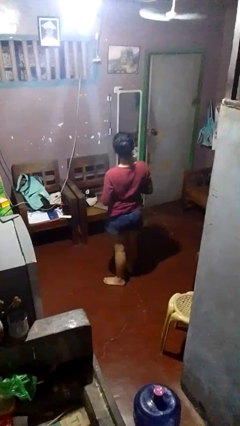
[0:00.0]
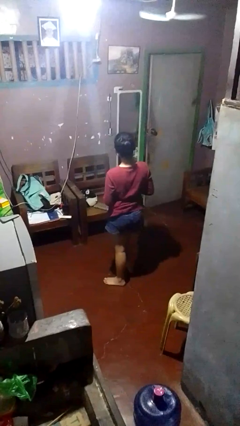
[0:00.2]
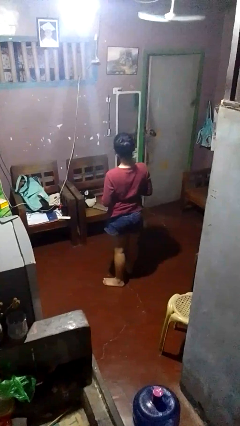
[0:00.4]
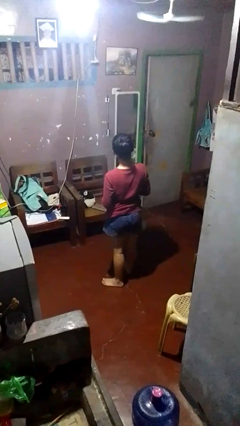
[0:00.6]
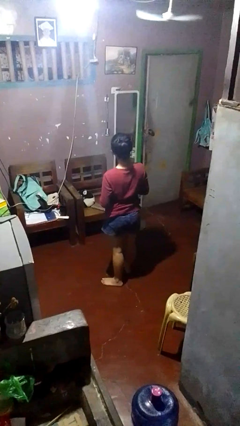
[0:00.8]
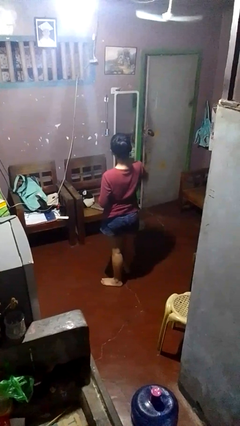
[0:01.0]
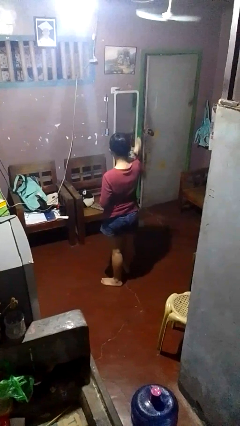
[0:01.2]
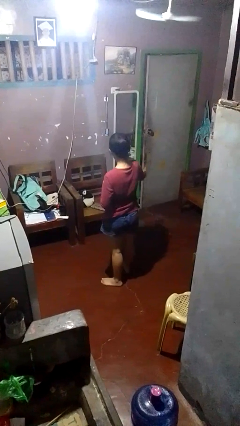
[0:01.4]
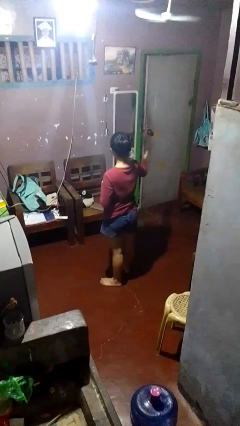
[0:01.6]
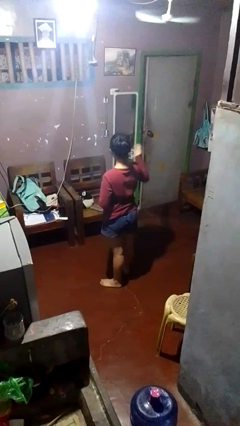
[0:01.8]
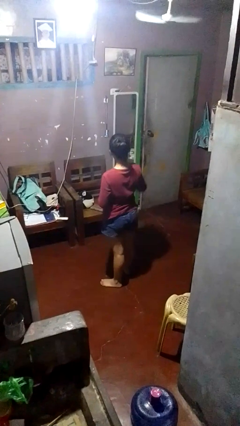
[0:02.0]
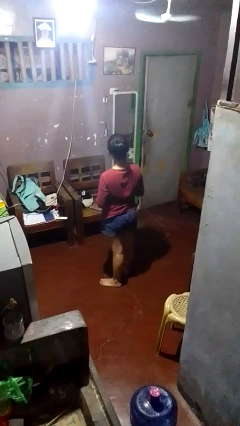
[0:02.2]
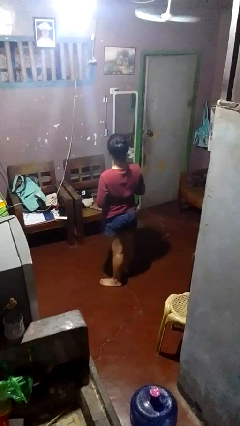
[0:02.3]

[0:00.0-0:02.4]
person karate chop

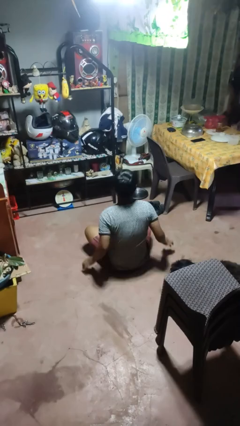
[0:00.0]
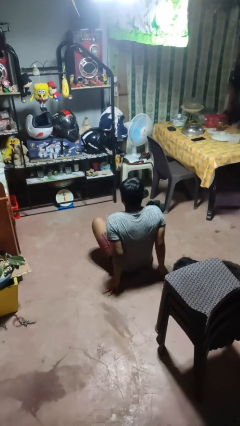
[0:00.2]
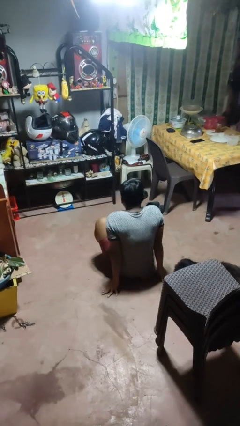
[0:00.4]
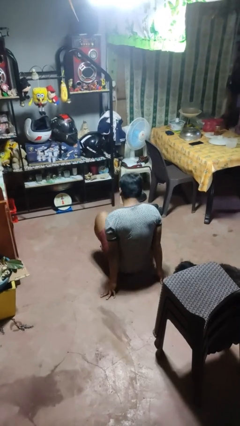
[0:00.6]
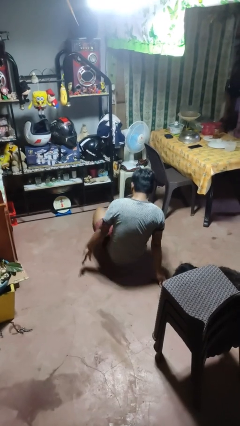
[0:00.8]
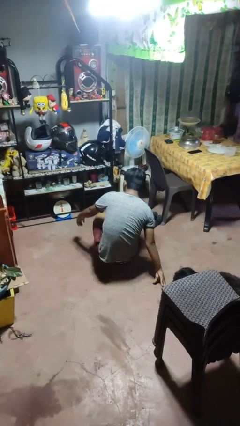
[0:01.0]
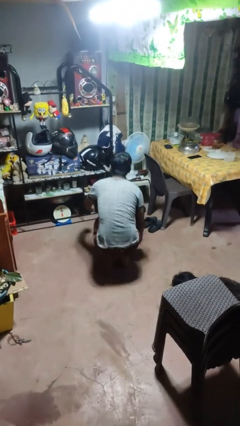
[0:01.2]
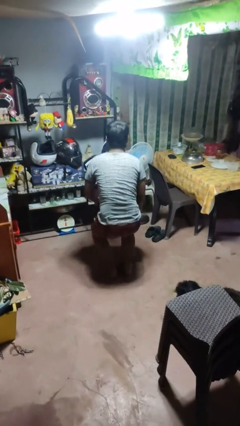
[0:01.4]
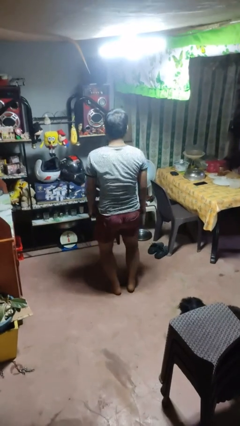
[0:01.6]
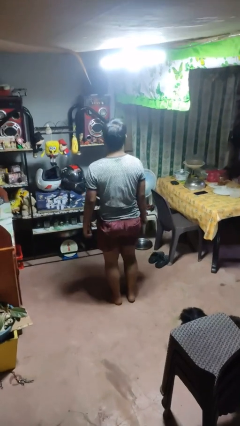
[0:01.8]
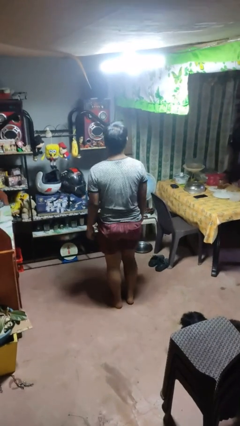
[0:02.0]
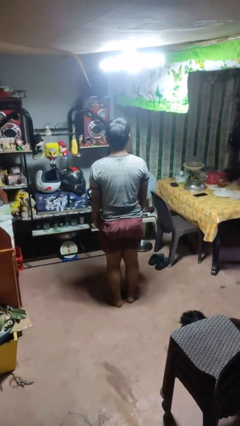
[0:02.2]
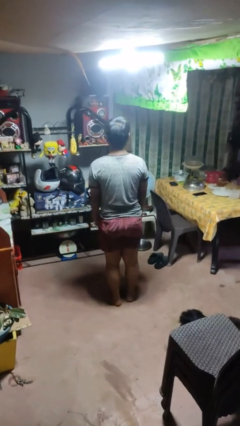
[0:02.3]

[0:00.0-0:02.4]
person stands up from floor

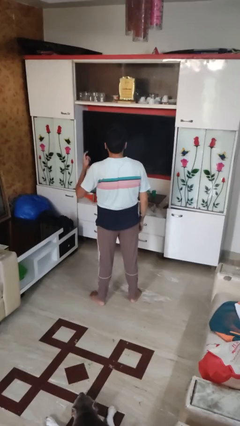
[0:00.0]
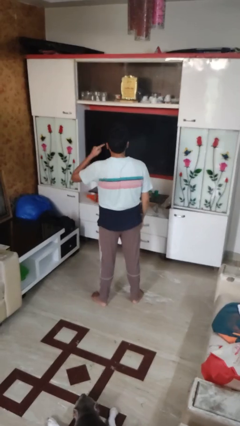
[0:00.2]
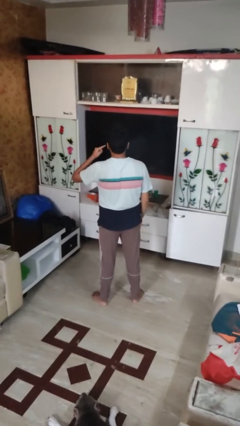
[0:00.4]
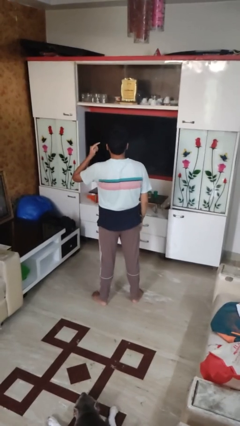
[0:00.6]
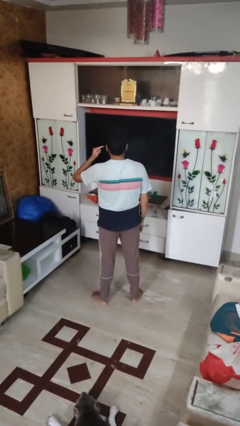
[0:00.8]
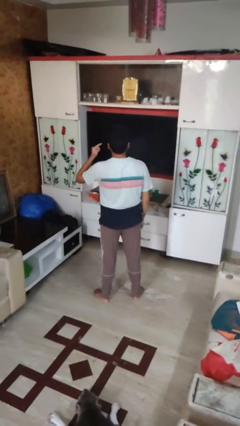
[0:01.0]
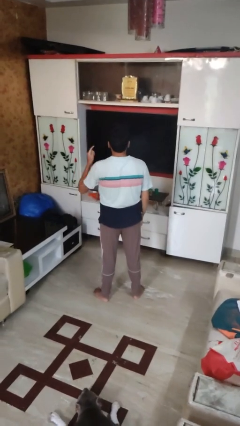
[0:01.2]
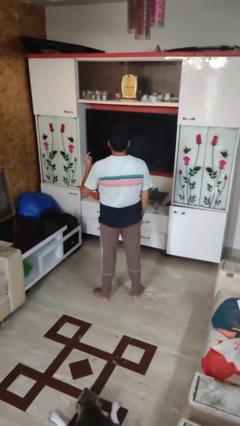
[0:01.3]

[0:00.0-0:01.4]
person gestures listen closely

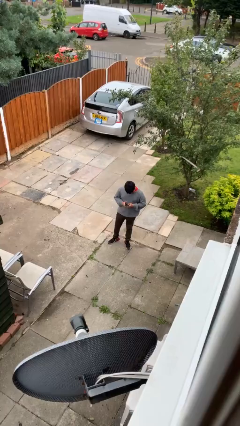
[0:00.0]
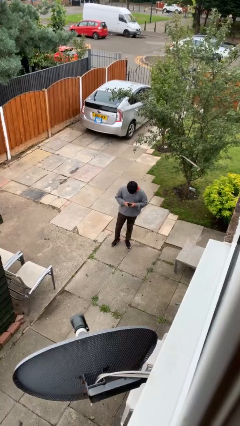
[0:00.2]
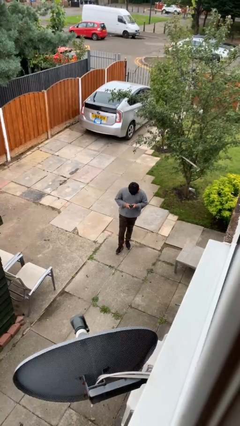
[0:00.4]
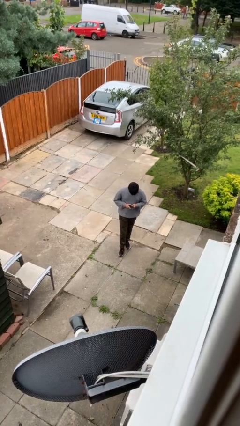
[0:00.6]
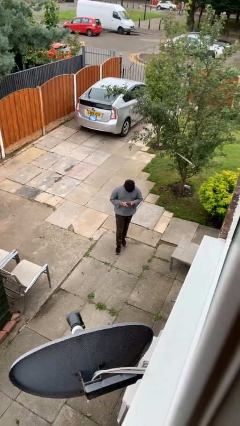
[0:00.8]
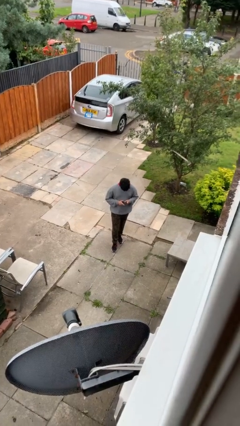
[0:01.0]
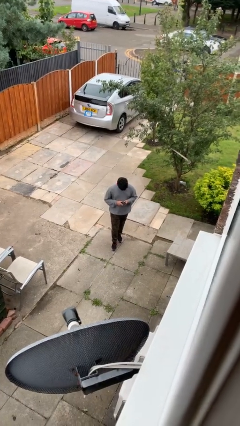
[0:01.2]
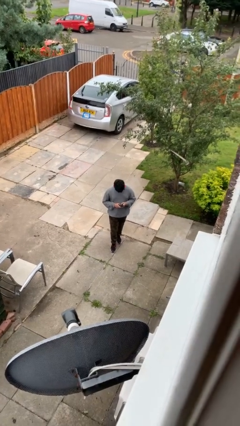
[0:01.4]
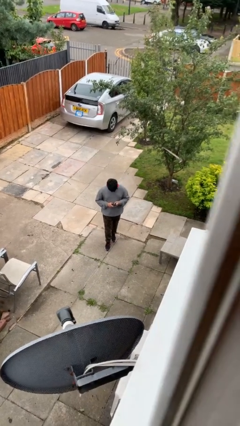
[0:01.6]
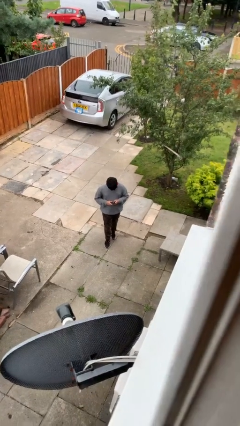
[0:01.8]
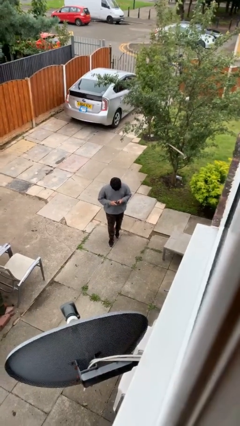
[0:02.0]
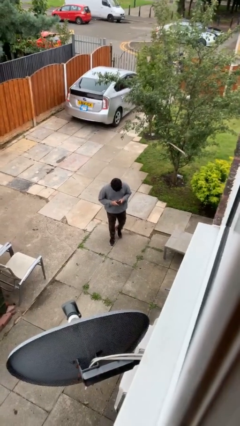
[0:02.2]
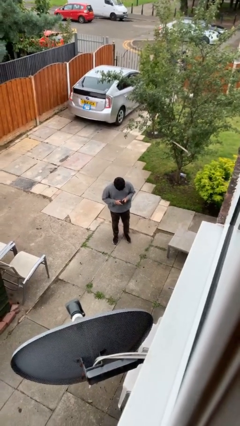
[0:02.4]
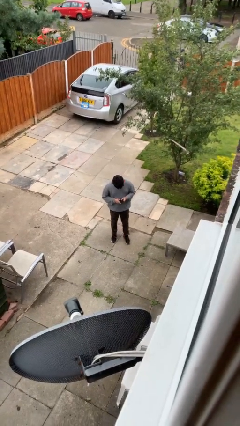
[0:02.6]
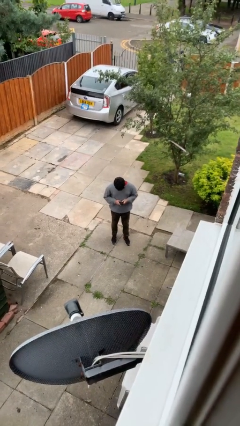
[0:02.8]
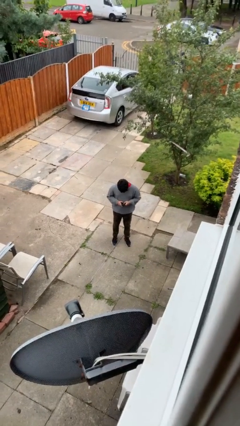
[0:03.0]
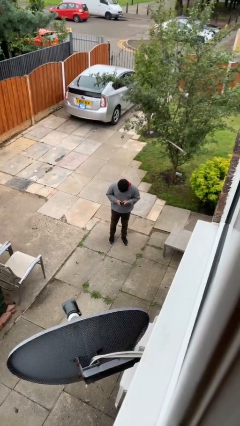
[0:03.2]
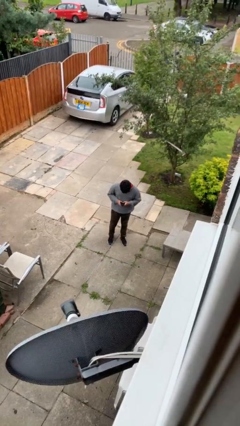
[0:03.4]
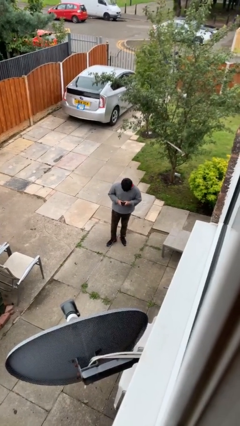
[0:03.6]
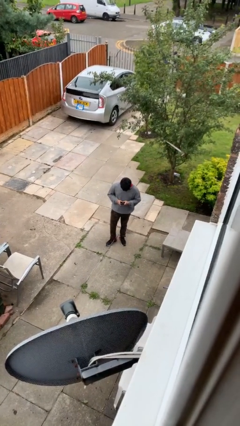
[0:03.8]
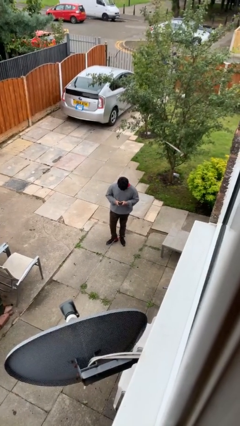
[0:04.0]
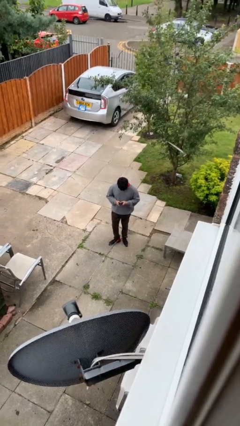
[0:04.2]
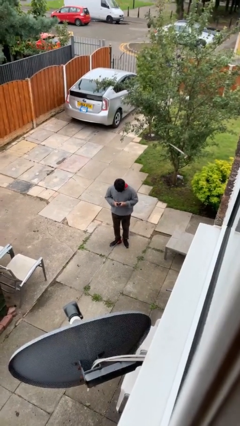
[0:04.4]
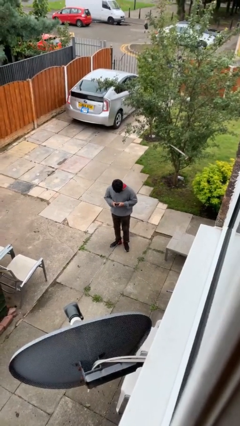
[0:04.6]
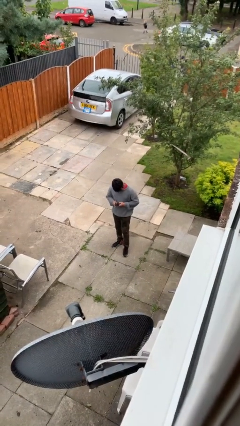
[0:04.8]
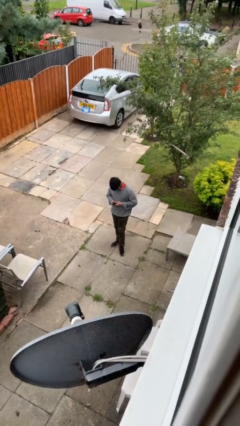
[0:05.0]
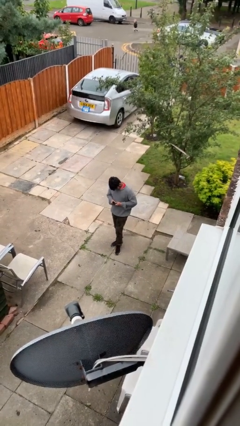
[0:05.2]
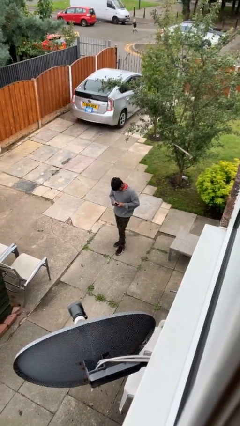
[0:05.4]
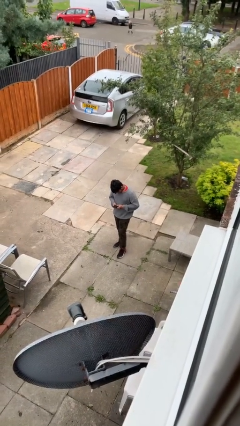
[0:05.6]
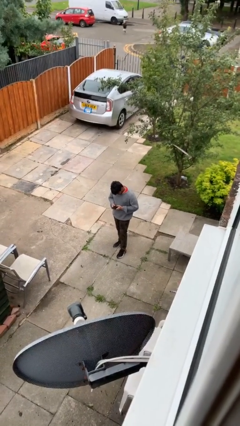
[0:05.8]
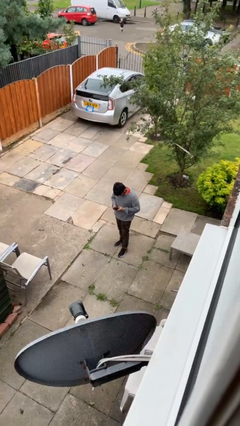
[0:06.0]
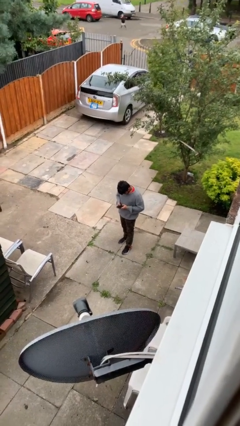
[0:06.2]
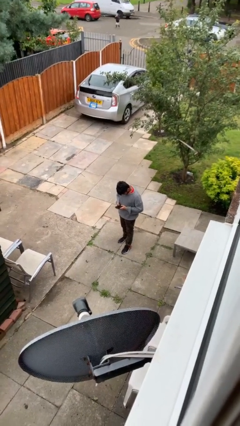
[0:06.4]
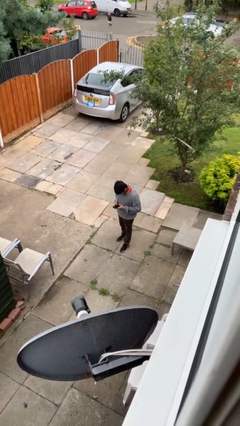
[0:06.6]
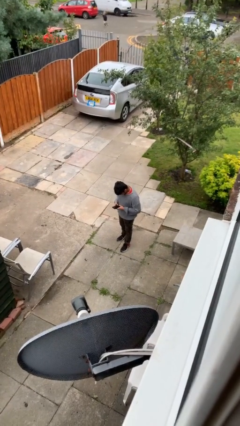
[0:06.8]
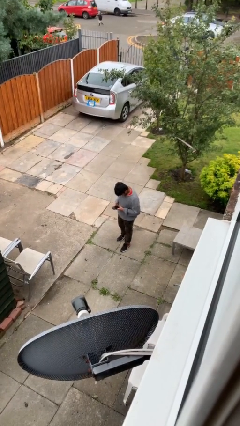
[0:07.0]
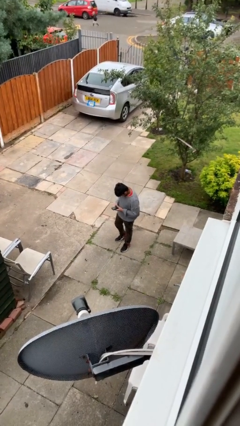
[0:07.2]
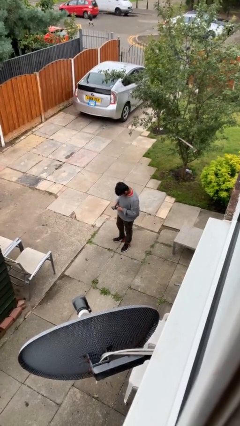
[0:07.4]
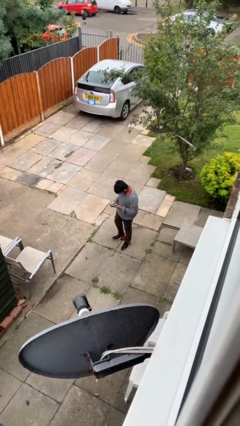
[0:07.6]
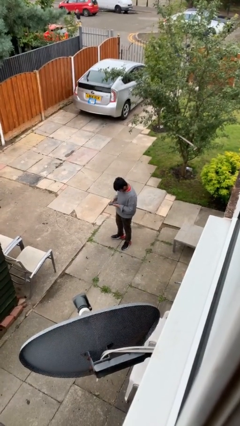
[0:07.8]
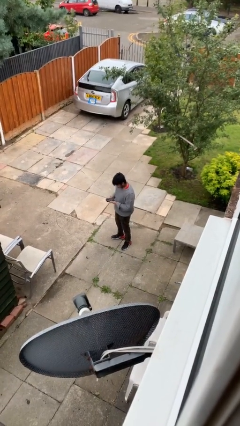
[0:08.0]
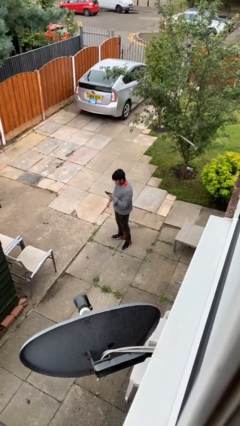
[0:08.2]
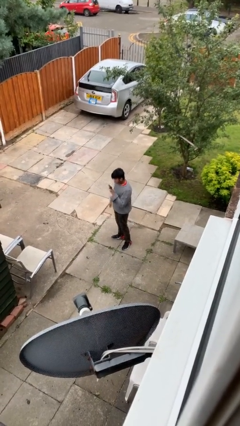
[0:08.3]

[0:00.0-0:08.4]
person texts on phone

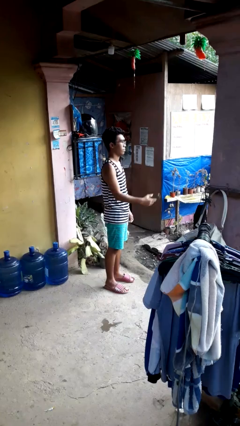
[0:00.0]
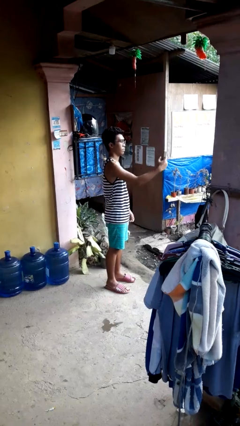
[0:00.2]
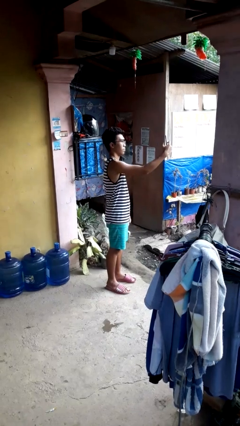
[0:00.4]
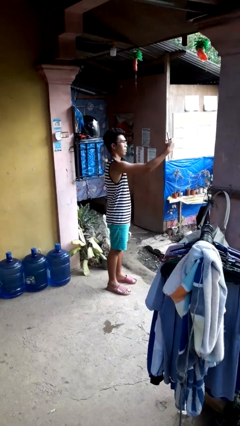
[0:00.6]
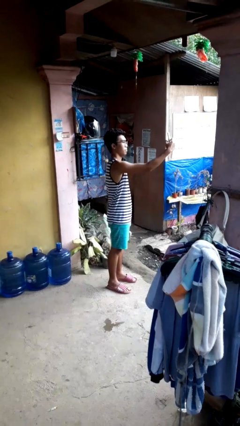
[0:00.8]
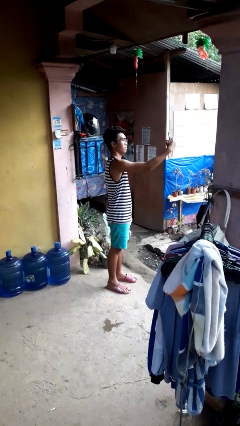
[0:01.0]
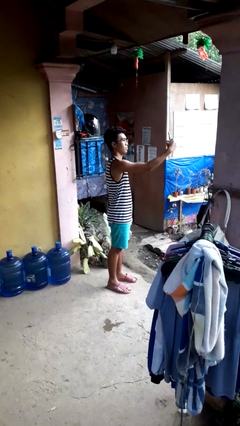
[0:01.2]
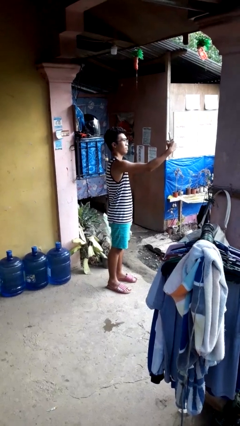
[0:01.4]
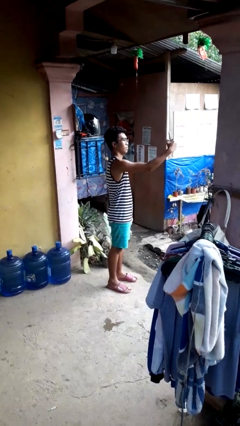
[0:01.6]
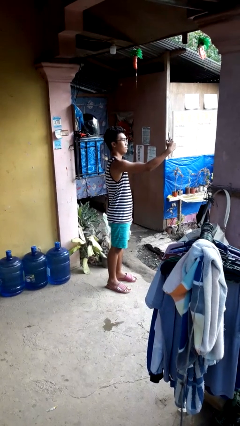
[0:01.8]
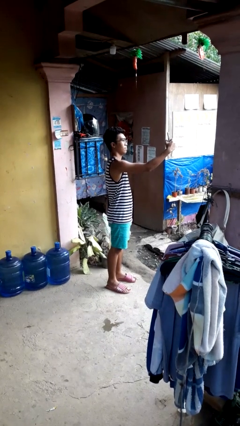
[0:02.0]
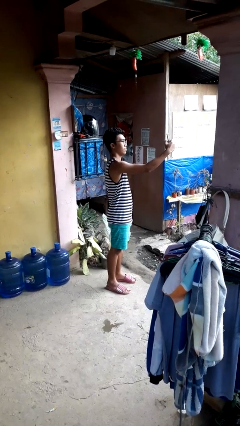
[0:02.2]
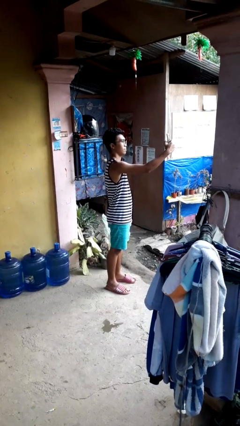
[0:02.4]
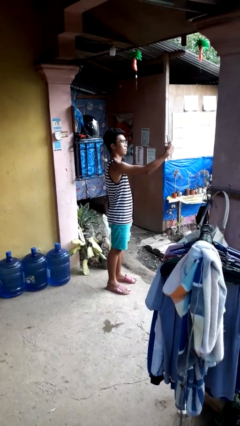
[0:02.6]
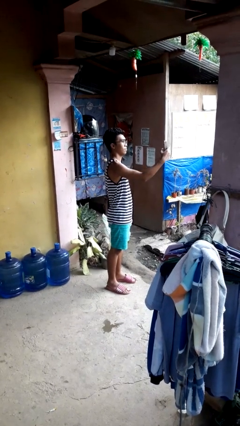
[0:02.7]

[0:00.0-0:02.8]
person takes selfie

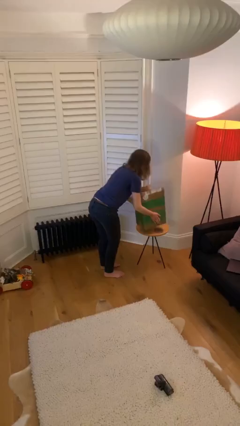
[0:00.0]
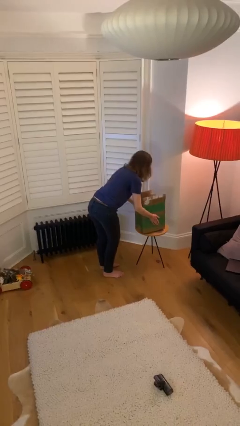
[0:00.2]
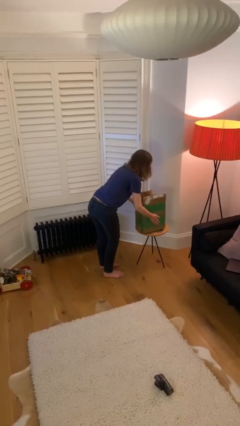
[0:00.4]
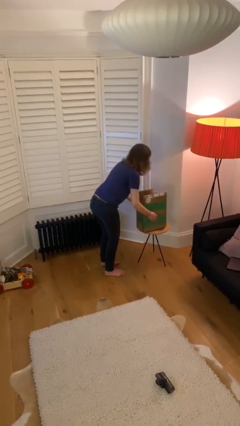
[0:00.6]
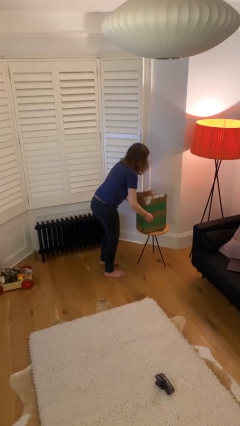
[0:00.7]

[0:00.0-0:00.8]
person puts down object on table
